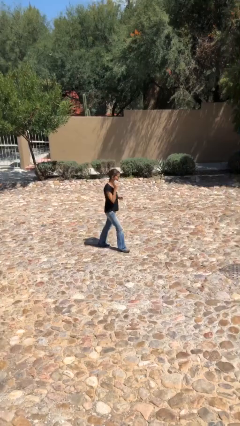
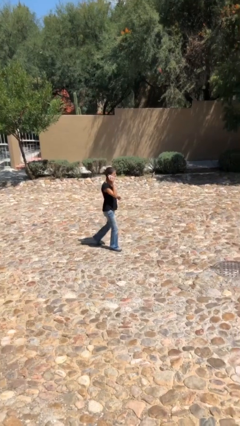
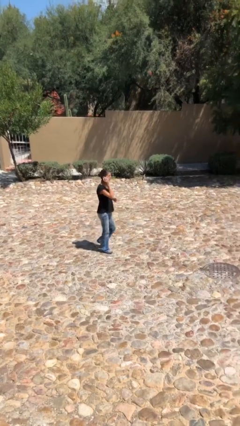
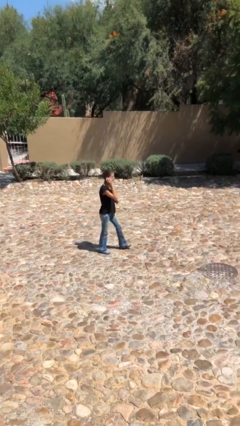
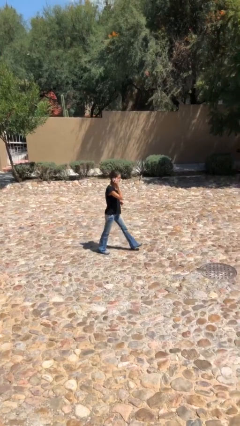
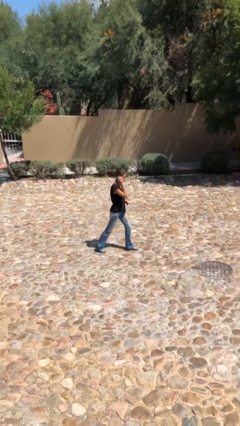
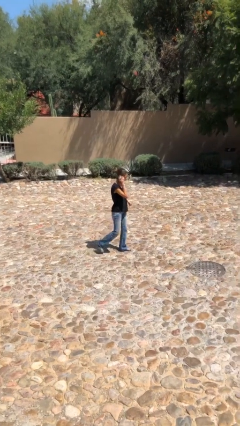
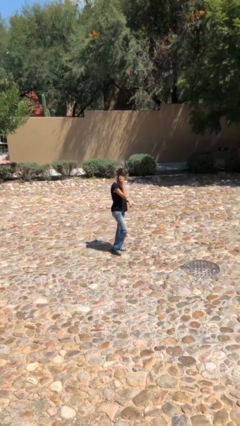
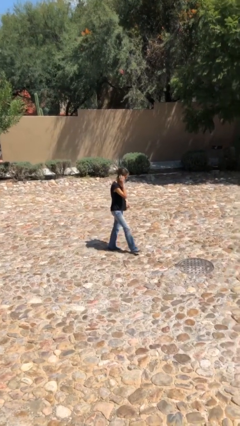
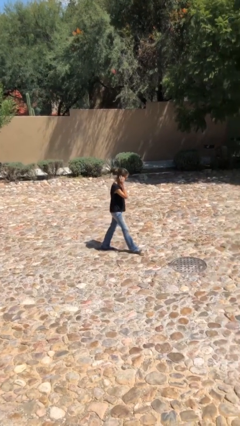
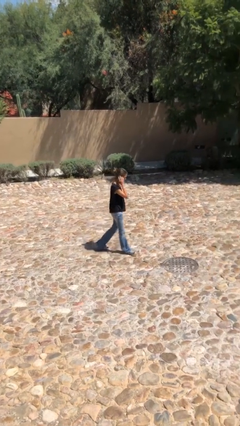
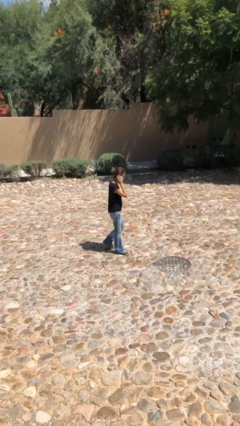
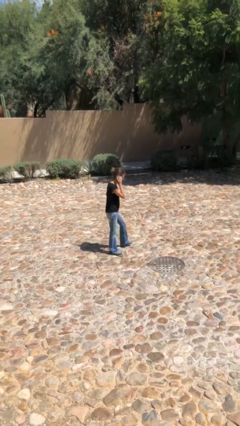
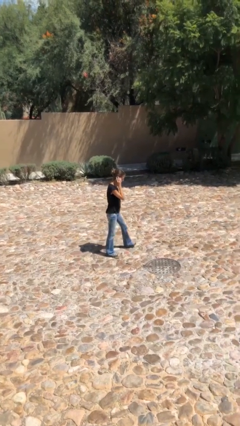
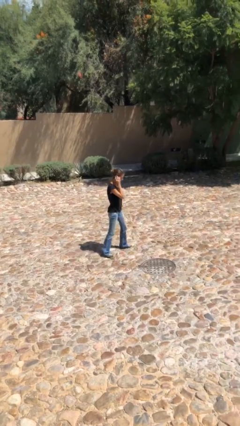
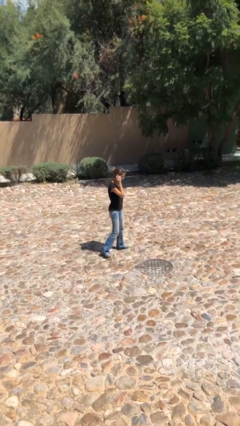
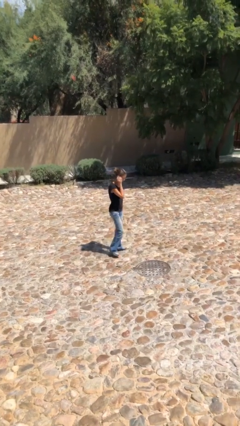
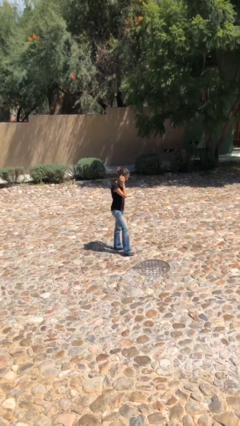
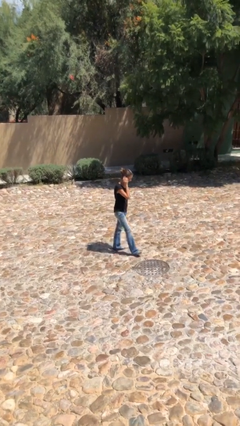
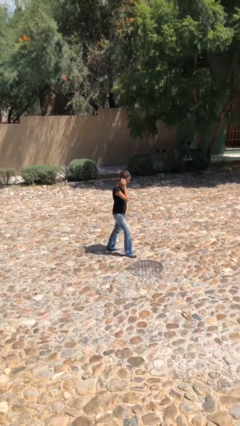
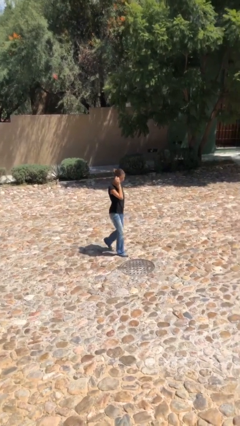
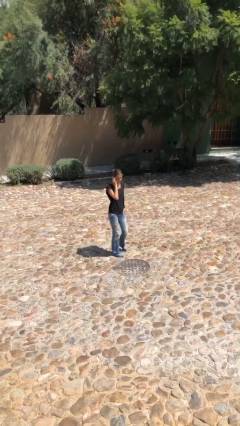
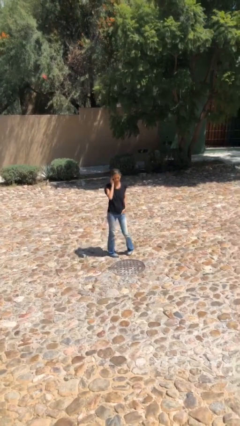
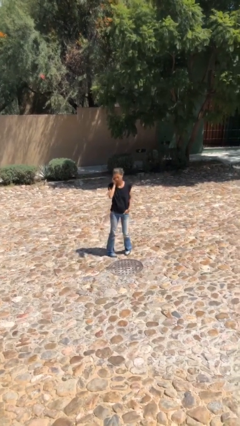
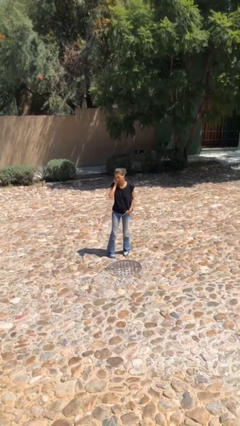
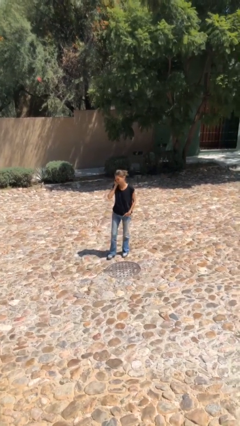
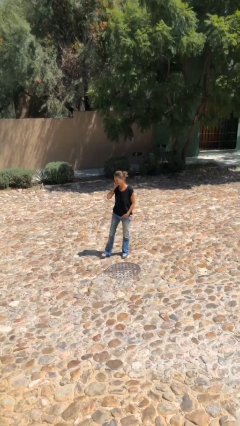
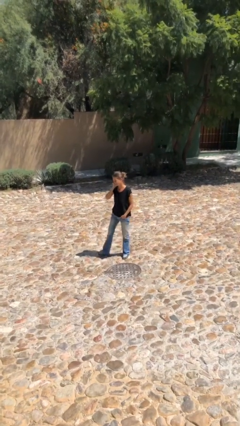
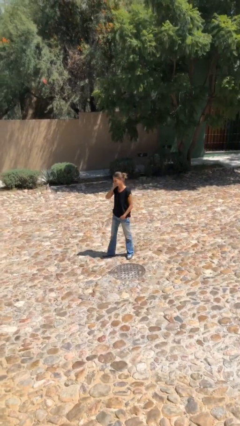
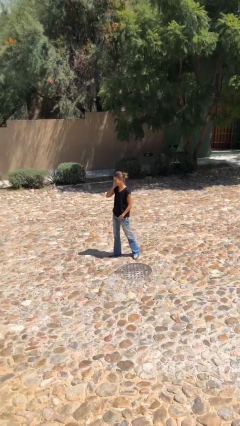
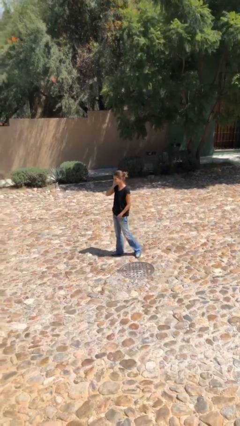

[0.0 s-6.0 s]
person talks on phone

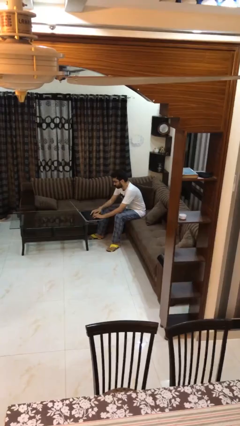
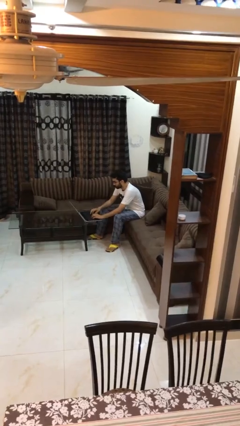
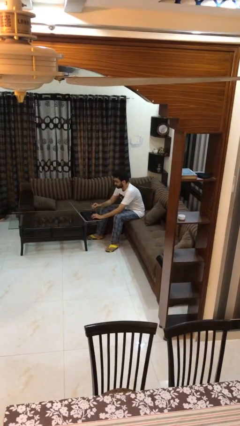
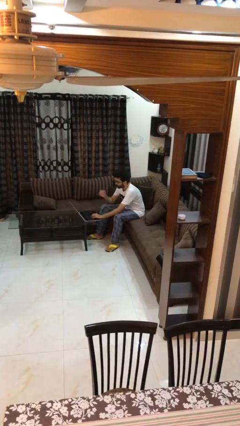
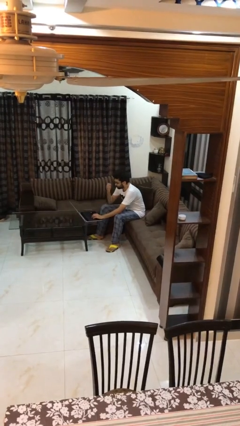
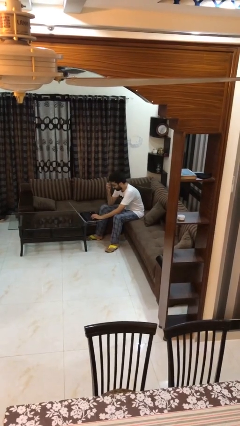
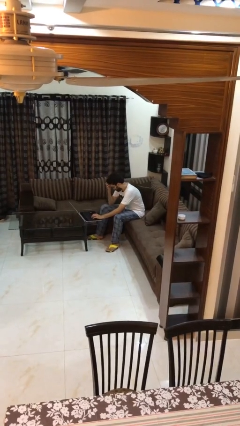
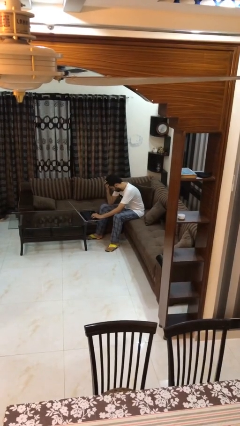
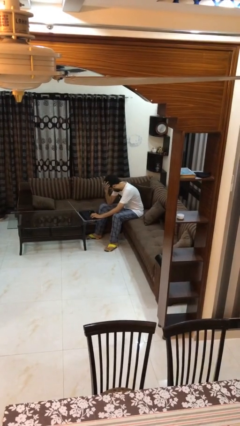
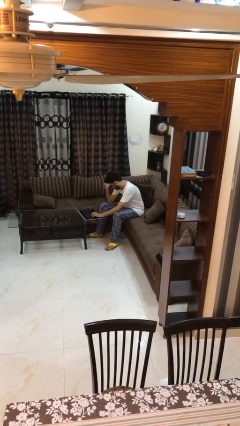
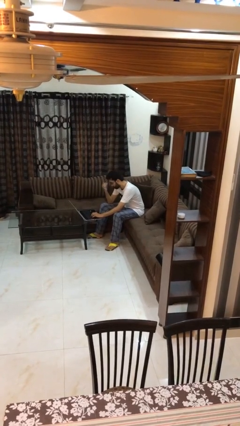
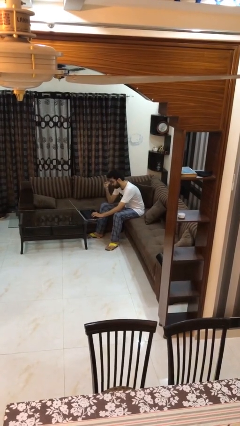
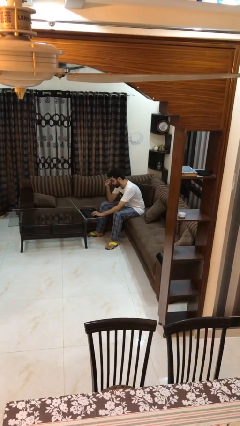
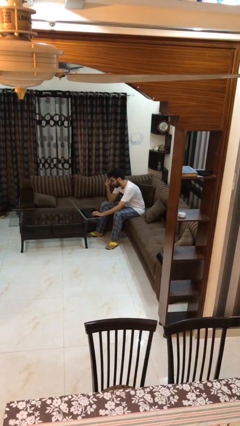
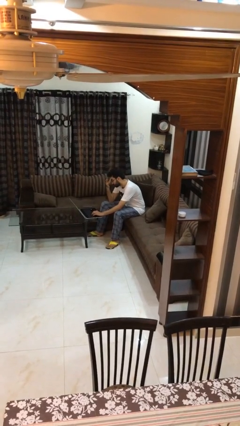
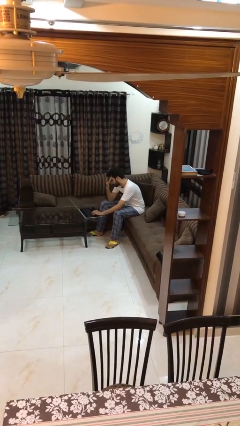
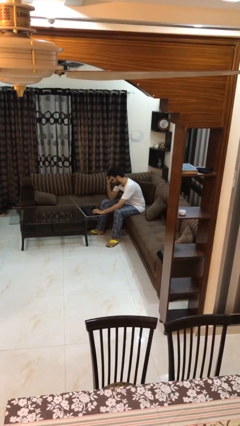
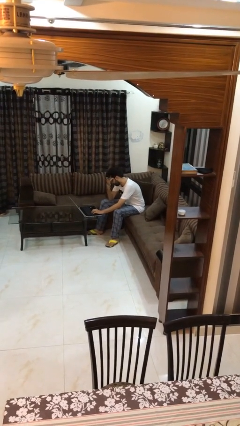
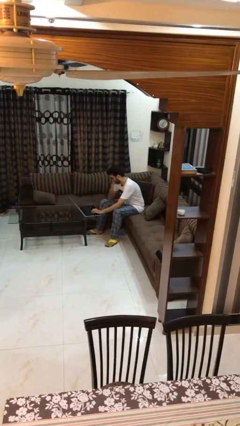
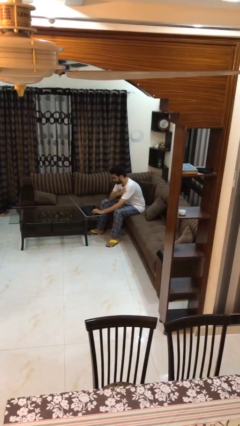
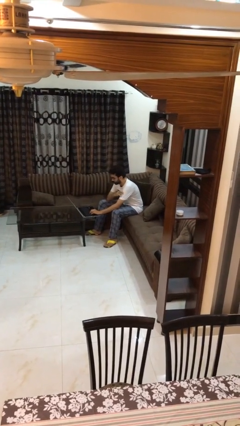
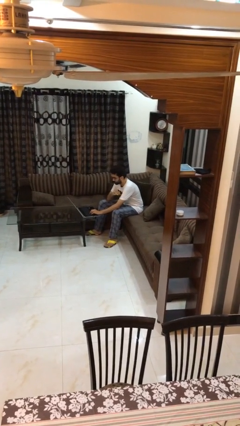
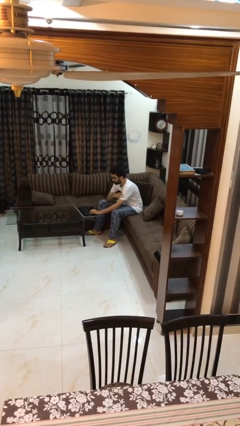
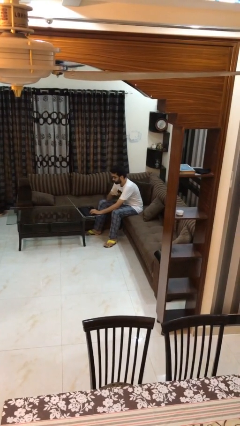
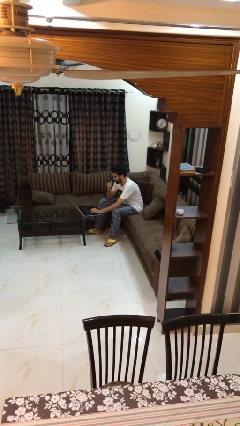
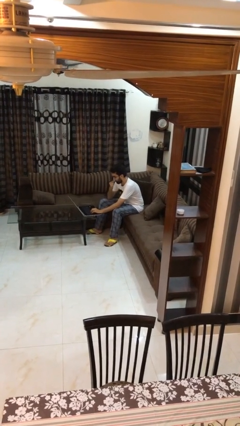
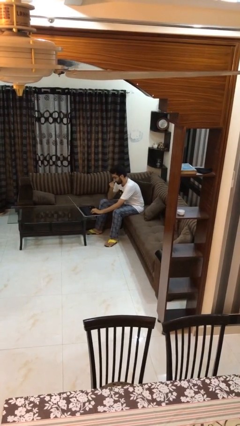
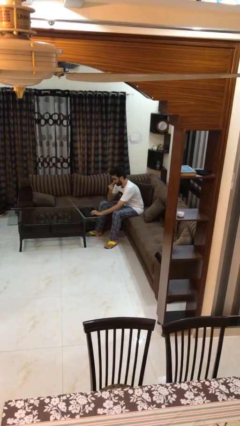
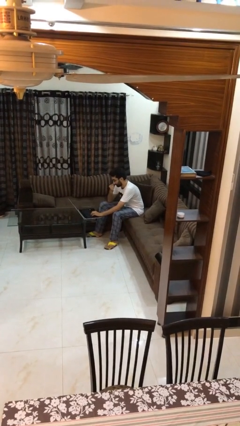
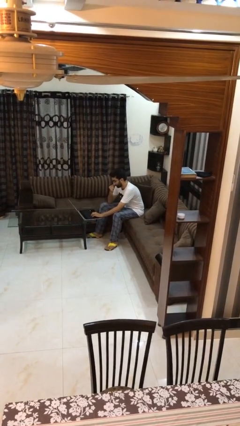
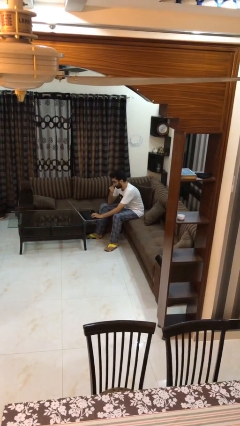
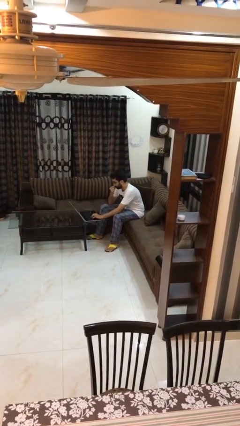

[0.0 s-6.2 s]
person interacts with laptop

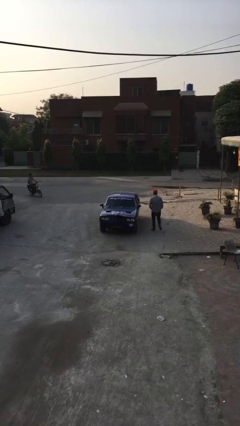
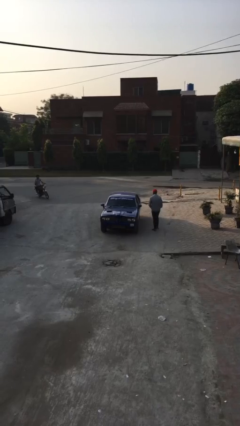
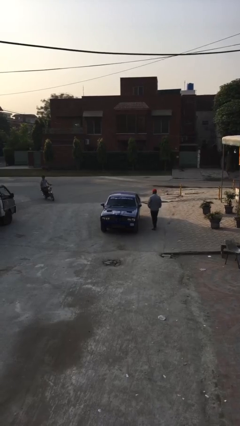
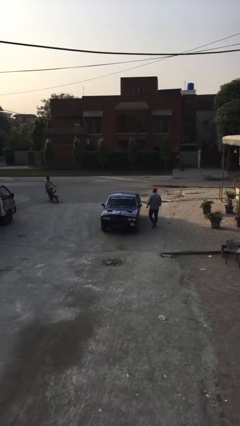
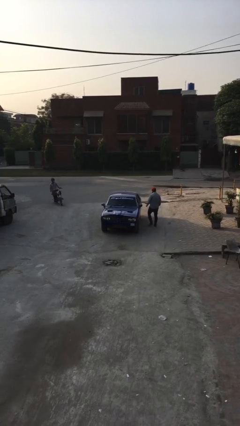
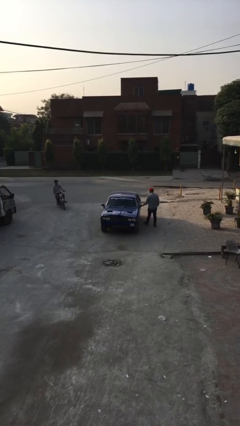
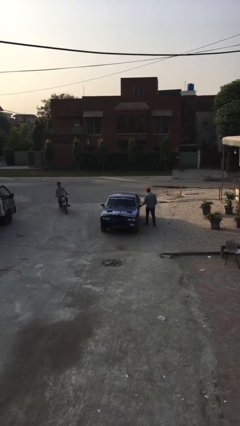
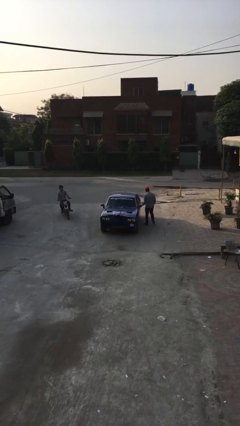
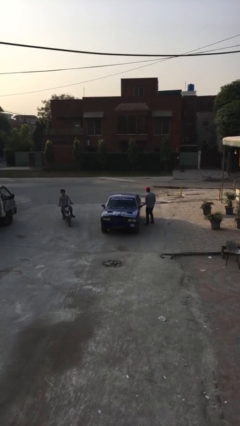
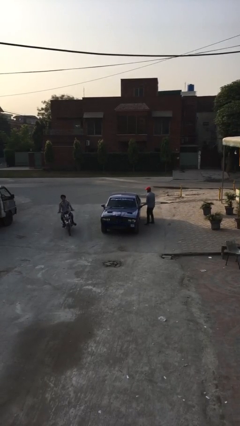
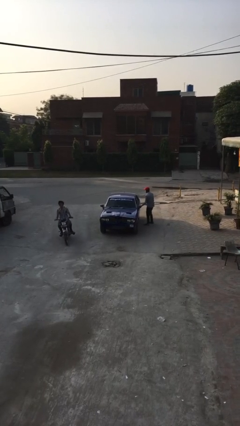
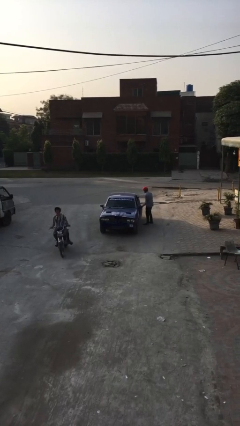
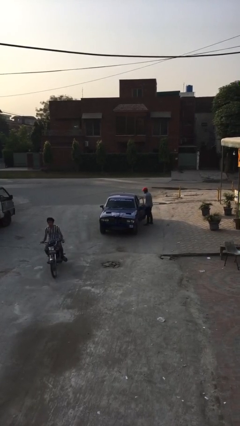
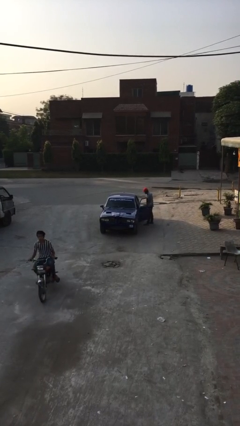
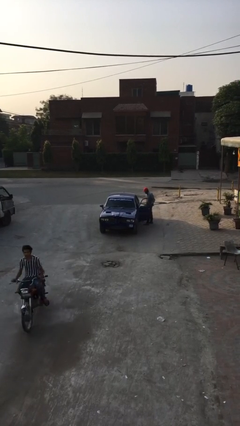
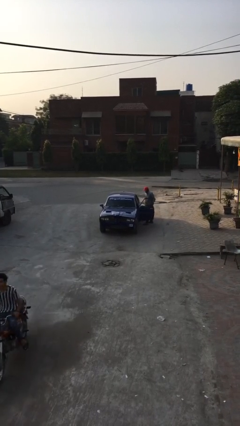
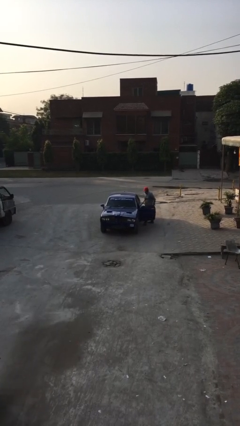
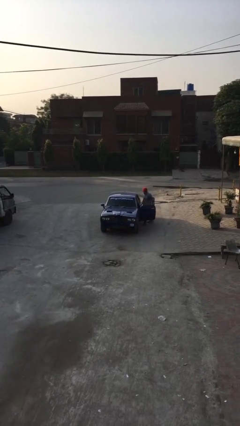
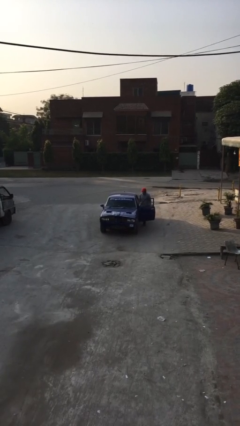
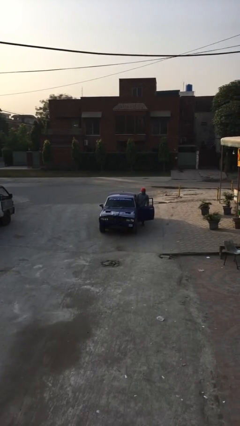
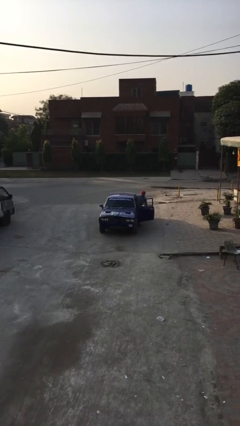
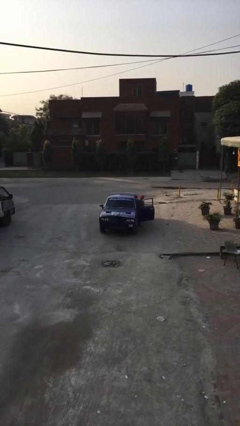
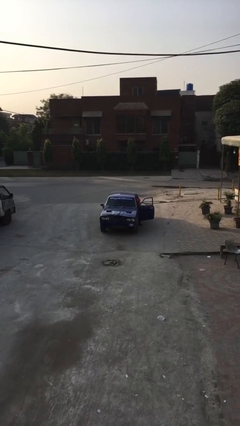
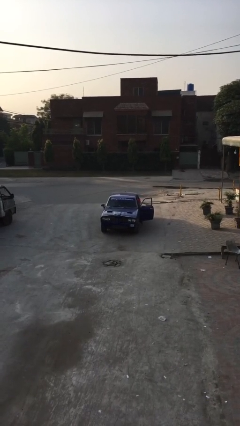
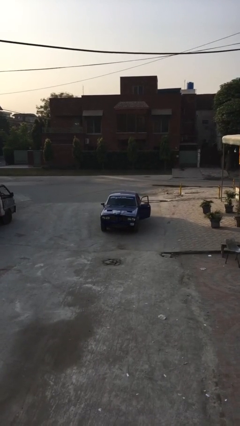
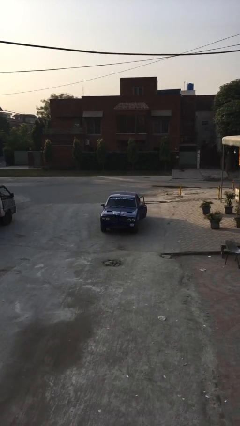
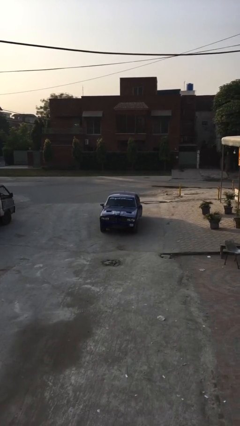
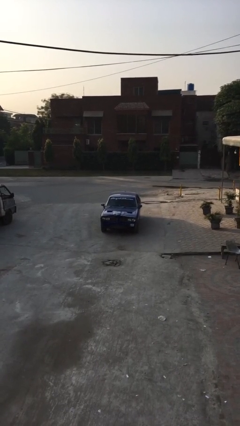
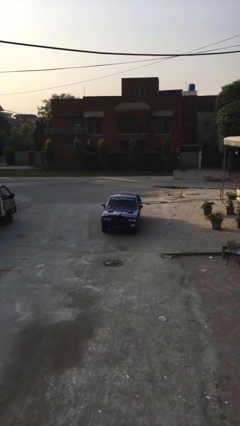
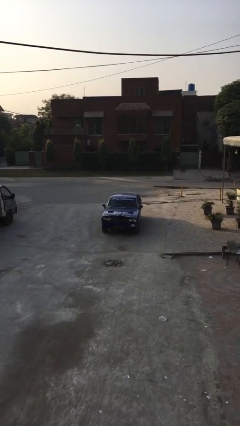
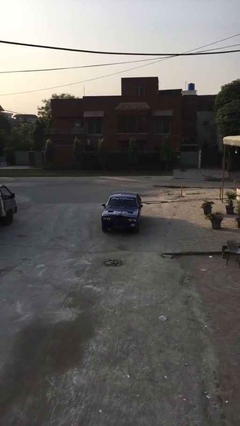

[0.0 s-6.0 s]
car picks up person
